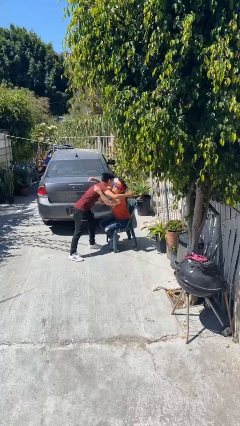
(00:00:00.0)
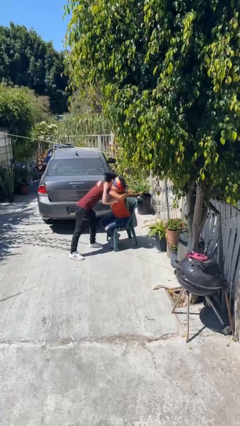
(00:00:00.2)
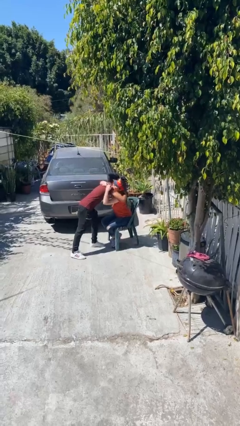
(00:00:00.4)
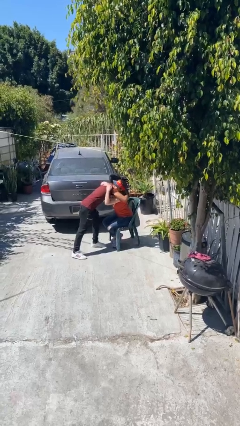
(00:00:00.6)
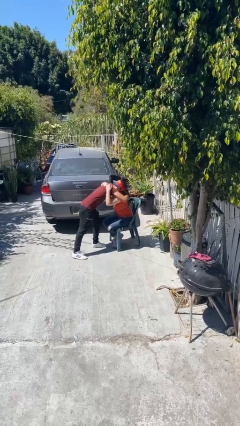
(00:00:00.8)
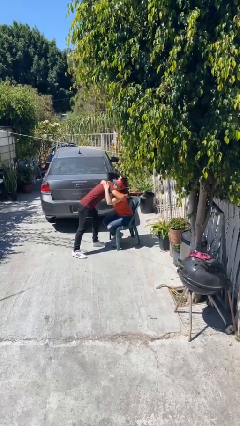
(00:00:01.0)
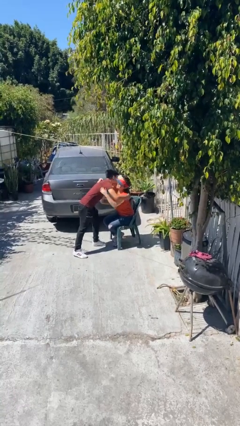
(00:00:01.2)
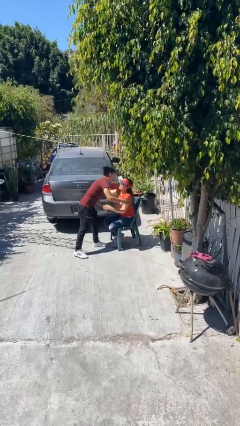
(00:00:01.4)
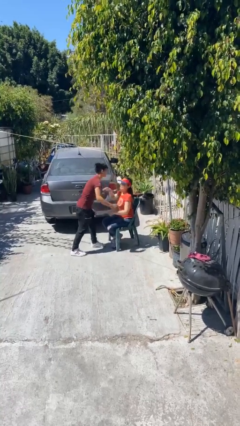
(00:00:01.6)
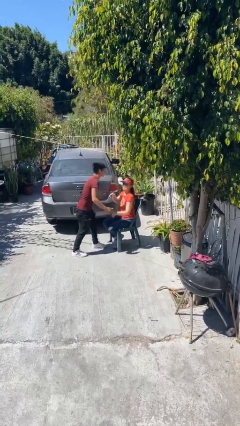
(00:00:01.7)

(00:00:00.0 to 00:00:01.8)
person embraces person

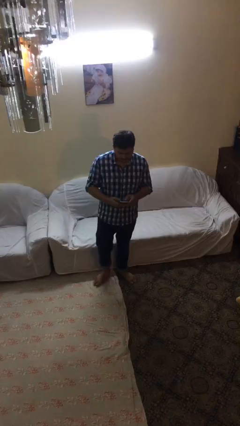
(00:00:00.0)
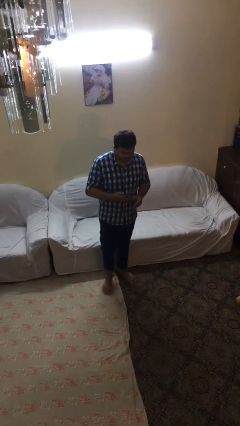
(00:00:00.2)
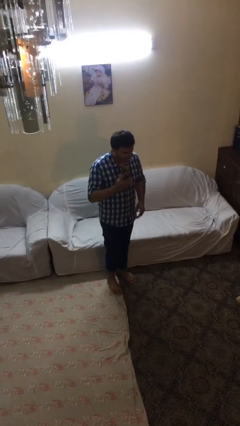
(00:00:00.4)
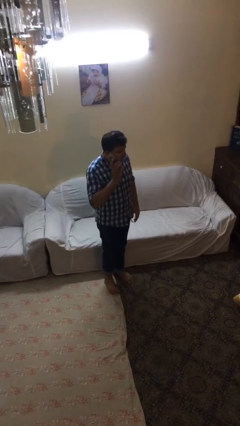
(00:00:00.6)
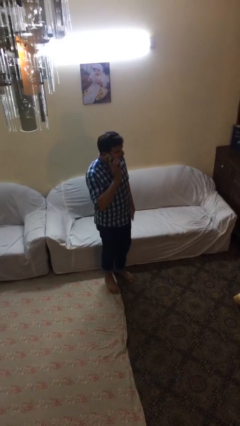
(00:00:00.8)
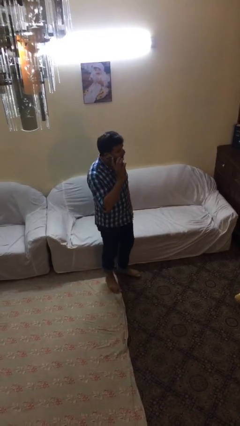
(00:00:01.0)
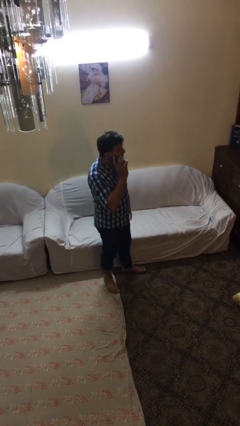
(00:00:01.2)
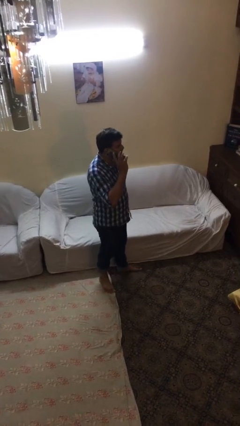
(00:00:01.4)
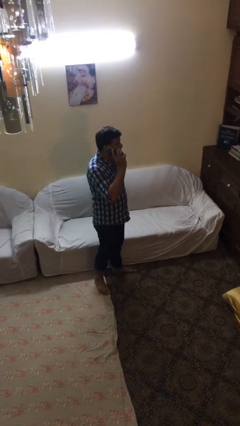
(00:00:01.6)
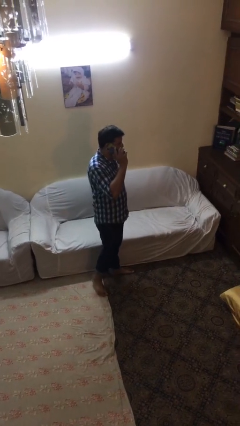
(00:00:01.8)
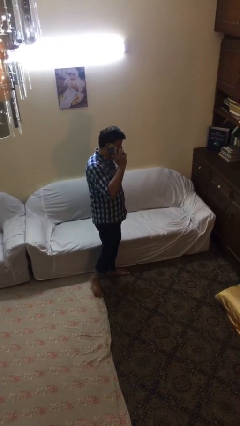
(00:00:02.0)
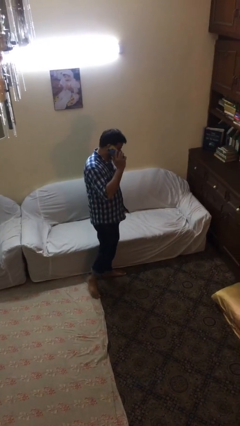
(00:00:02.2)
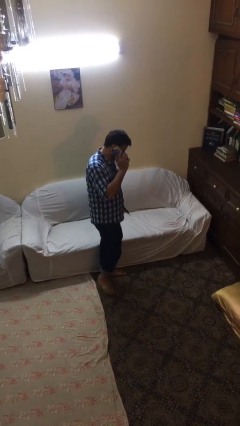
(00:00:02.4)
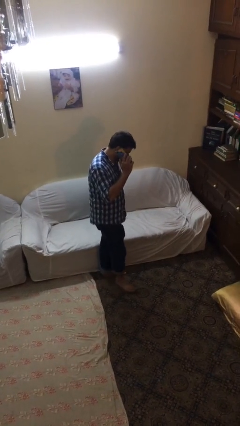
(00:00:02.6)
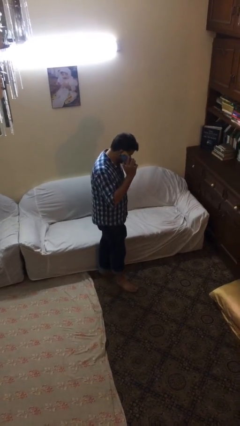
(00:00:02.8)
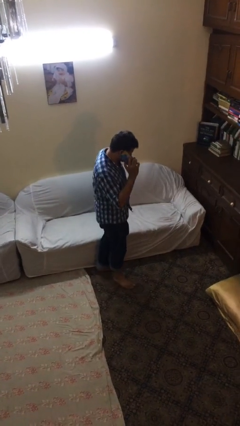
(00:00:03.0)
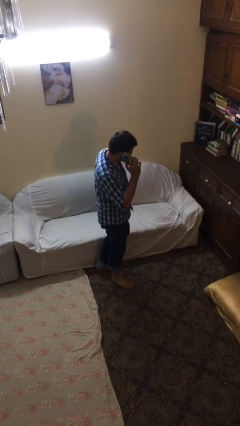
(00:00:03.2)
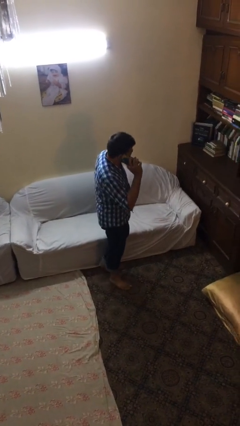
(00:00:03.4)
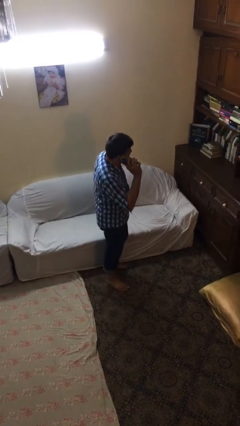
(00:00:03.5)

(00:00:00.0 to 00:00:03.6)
person texts on phone

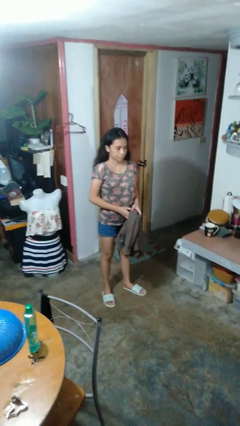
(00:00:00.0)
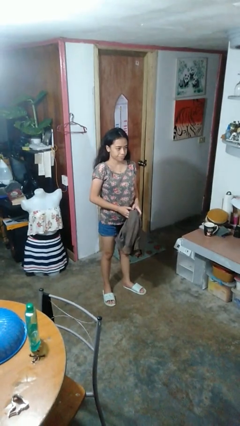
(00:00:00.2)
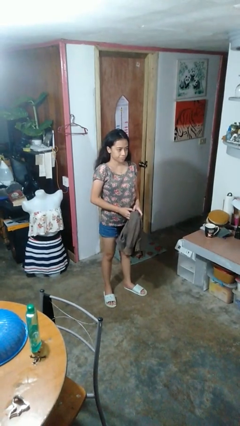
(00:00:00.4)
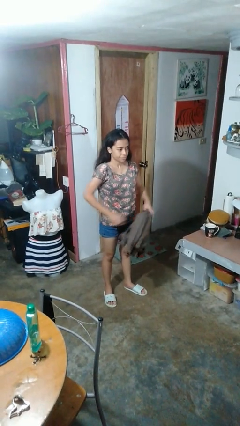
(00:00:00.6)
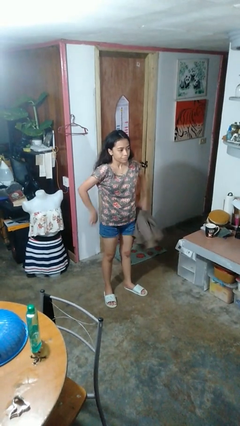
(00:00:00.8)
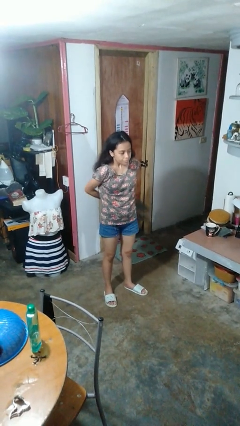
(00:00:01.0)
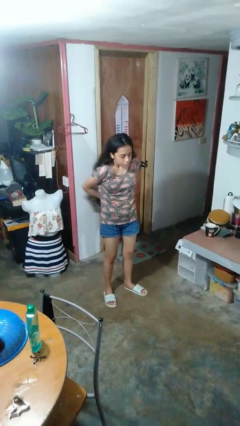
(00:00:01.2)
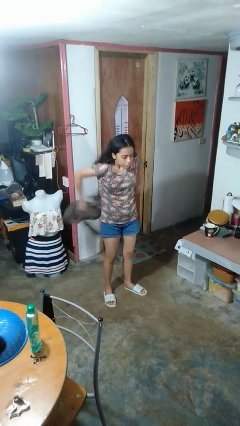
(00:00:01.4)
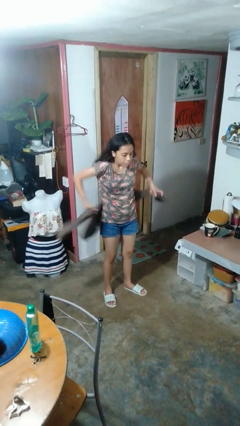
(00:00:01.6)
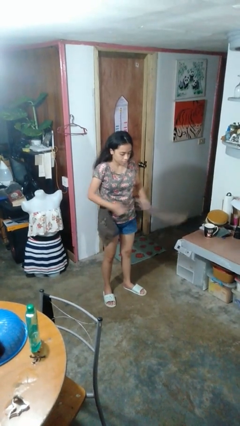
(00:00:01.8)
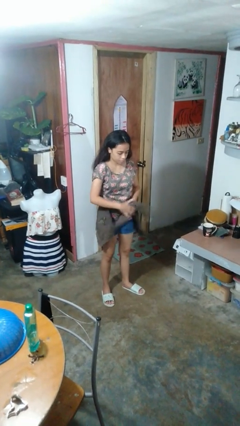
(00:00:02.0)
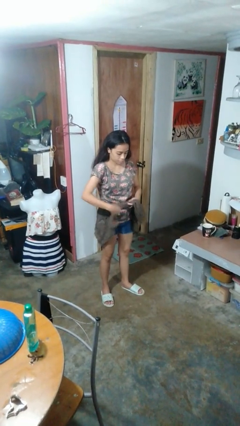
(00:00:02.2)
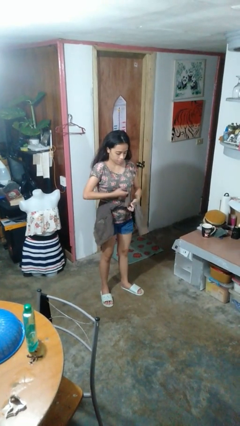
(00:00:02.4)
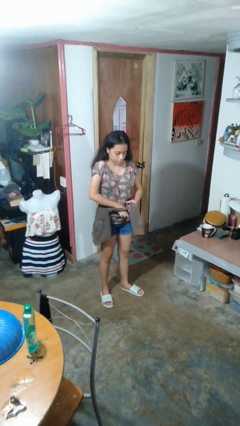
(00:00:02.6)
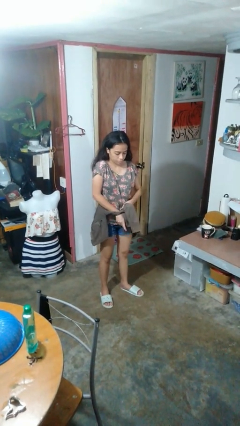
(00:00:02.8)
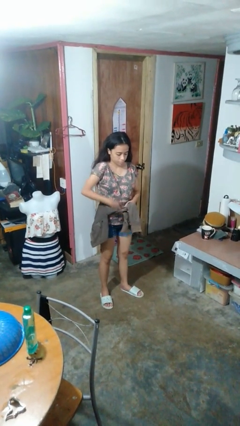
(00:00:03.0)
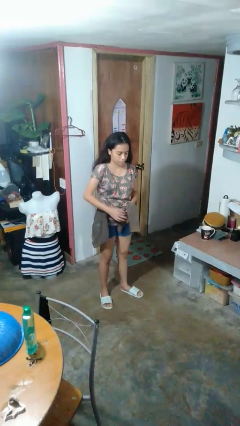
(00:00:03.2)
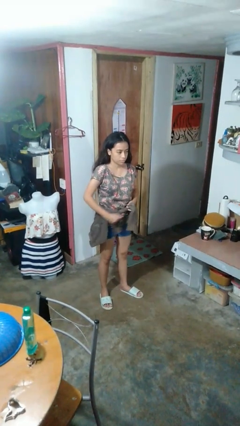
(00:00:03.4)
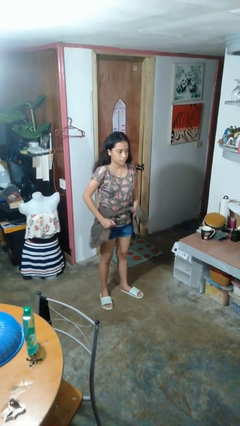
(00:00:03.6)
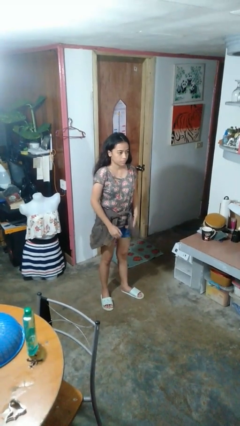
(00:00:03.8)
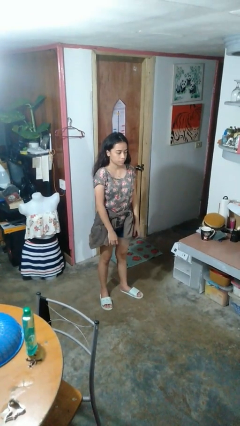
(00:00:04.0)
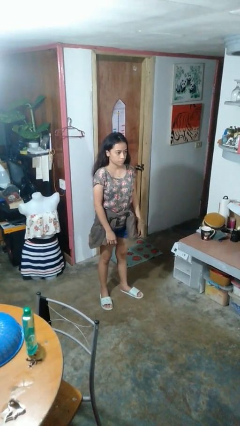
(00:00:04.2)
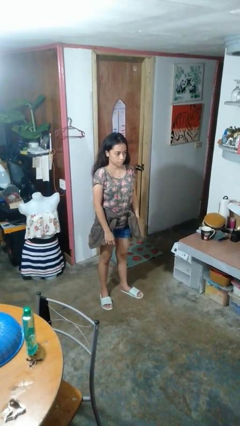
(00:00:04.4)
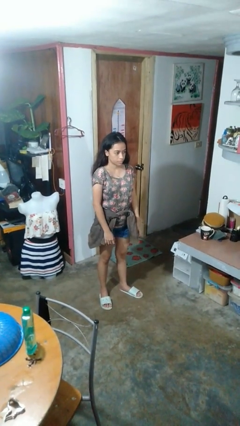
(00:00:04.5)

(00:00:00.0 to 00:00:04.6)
person ties jacket around waist

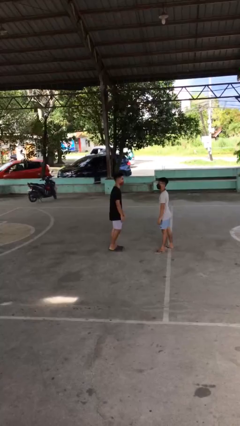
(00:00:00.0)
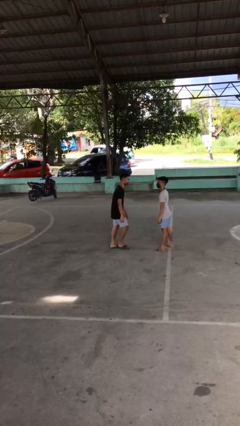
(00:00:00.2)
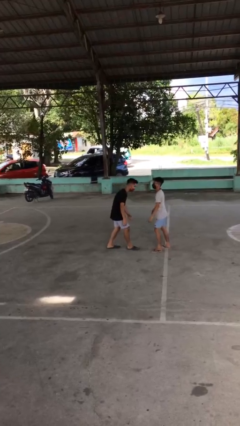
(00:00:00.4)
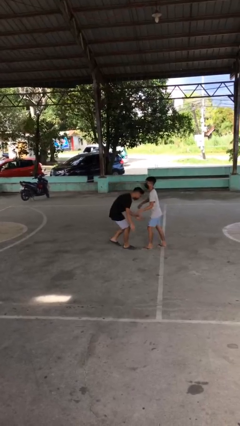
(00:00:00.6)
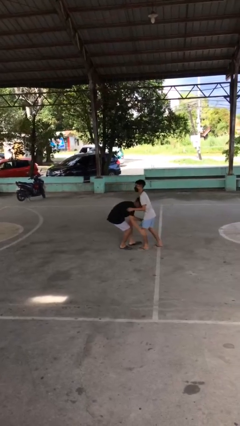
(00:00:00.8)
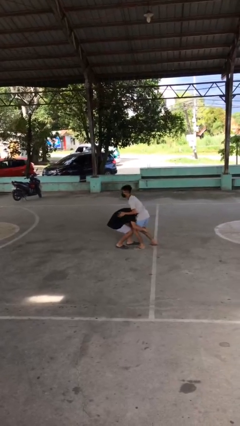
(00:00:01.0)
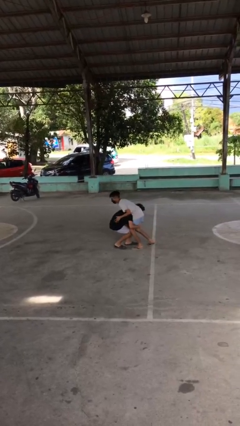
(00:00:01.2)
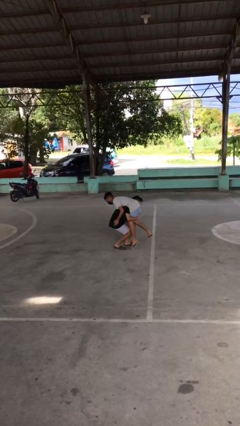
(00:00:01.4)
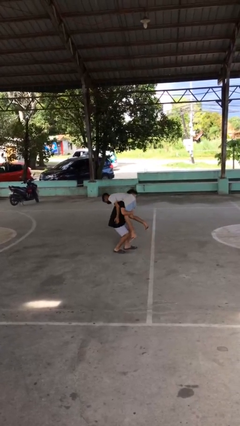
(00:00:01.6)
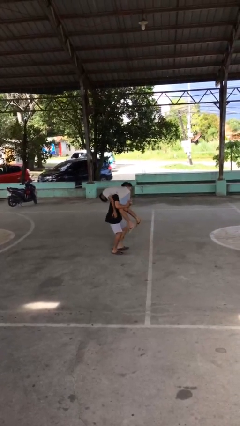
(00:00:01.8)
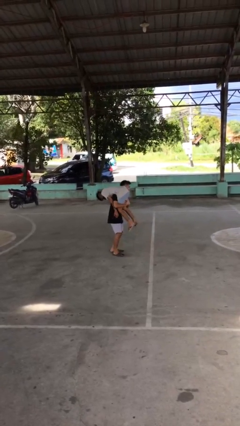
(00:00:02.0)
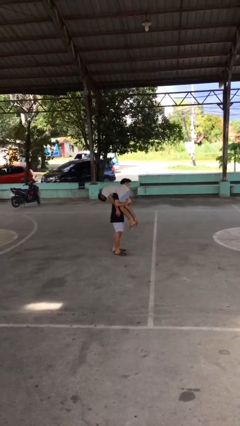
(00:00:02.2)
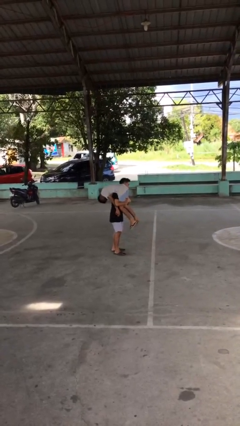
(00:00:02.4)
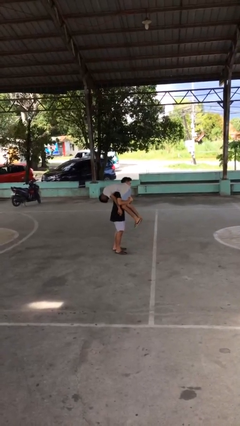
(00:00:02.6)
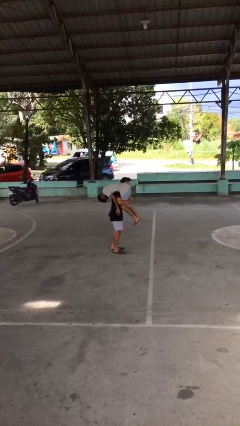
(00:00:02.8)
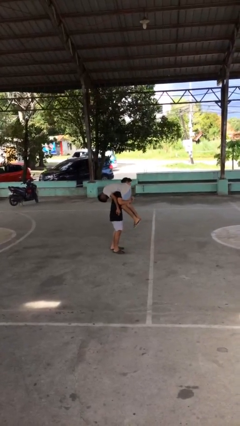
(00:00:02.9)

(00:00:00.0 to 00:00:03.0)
person carries person over shoulder

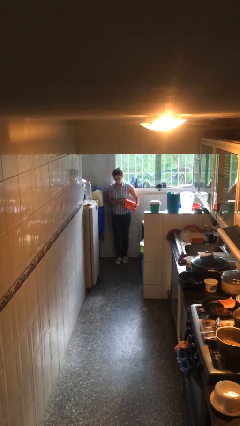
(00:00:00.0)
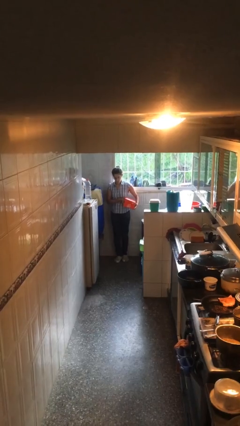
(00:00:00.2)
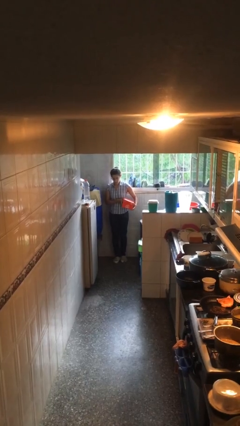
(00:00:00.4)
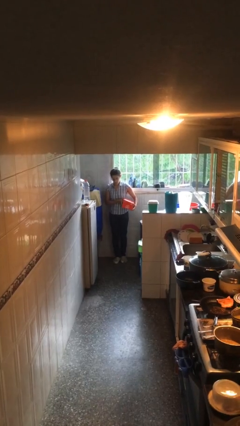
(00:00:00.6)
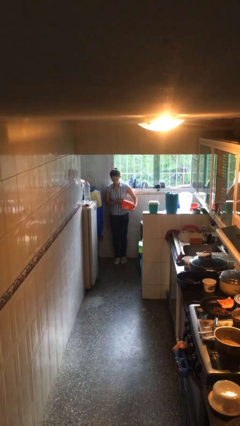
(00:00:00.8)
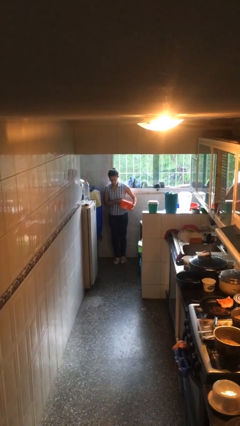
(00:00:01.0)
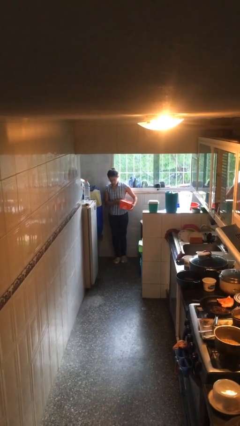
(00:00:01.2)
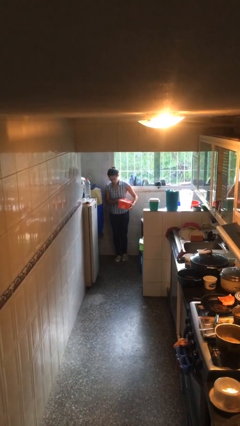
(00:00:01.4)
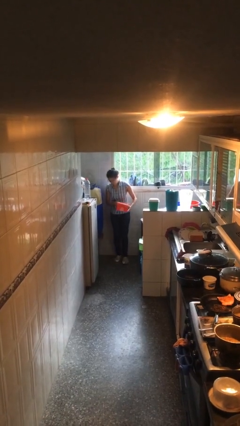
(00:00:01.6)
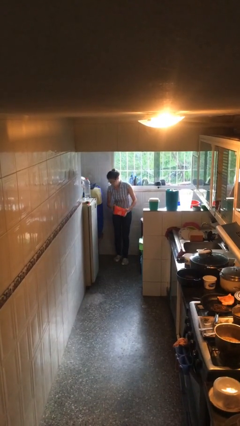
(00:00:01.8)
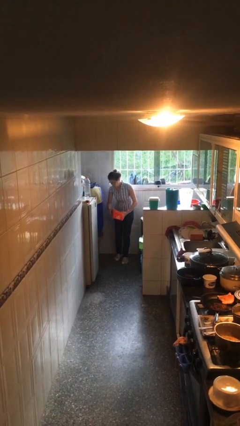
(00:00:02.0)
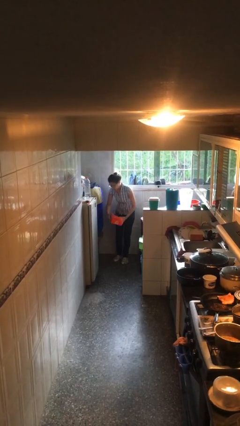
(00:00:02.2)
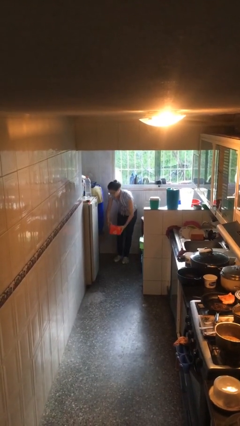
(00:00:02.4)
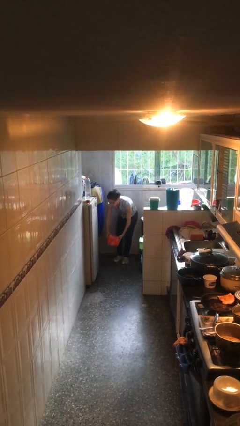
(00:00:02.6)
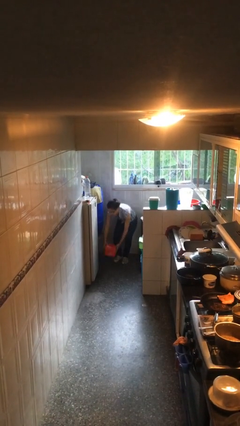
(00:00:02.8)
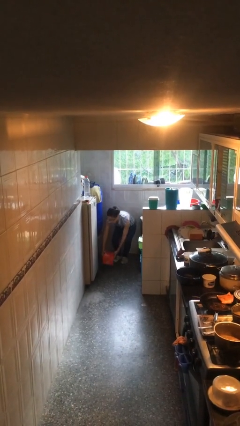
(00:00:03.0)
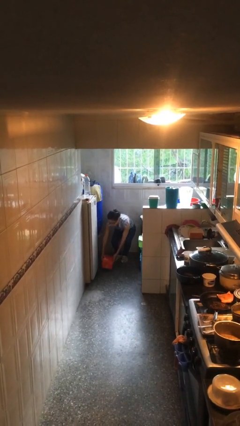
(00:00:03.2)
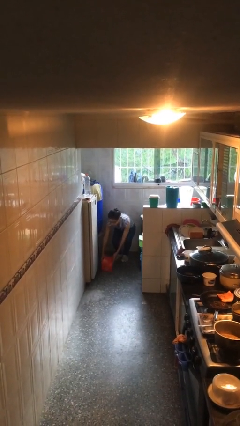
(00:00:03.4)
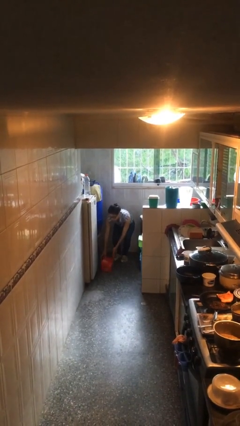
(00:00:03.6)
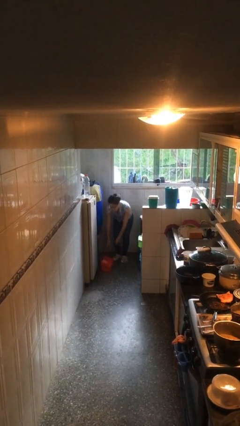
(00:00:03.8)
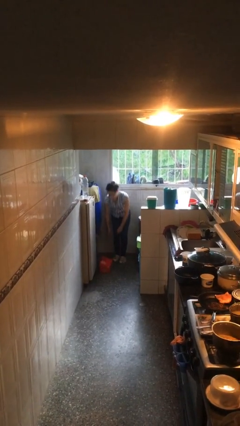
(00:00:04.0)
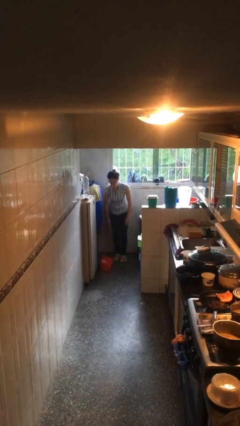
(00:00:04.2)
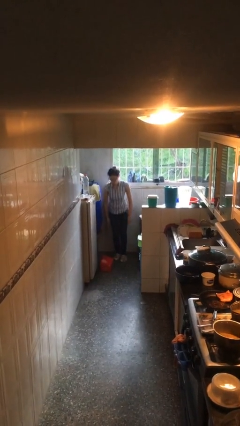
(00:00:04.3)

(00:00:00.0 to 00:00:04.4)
person puts down object on floor
